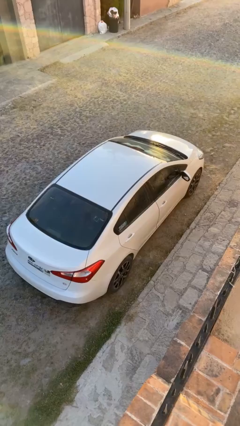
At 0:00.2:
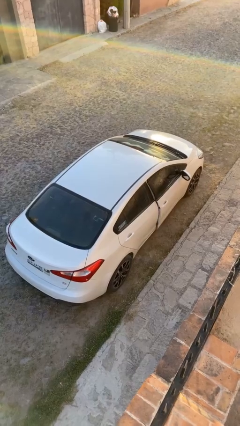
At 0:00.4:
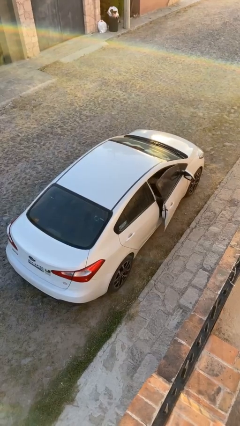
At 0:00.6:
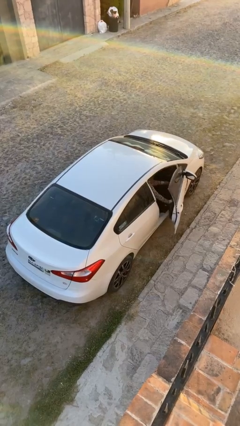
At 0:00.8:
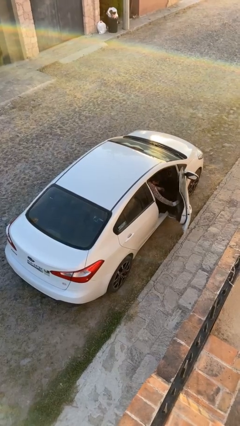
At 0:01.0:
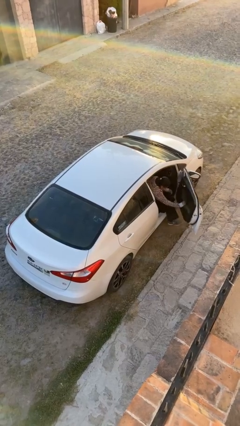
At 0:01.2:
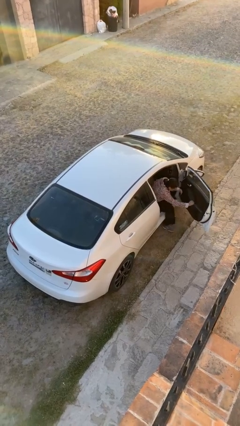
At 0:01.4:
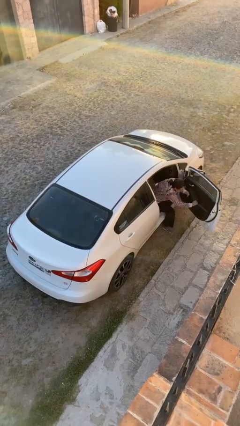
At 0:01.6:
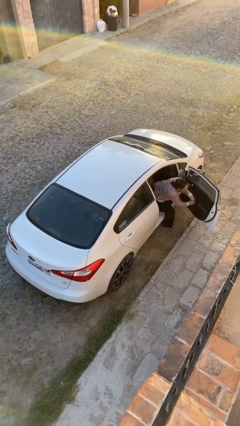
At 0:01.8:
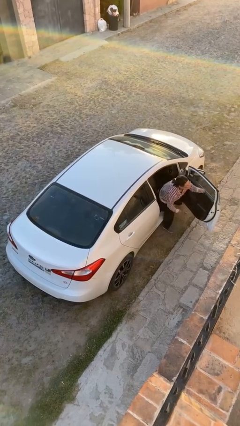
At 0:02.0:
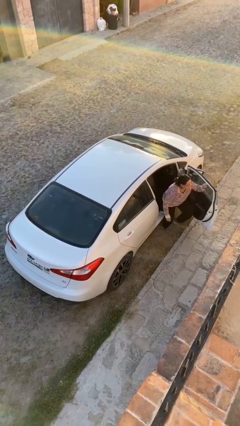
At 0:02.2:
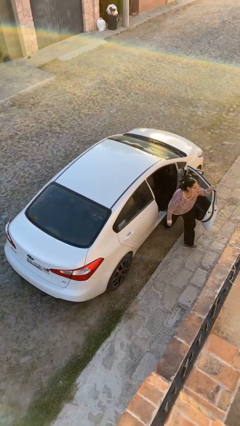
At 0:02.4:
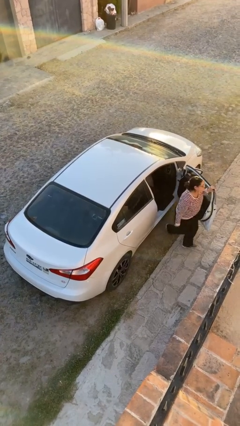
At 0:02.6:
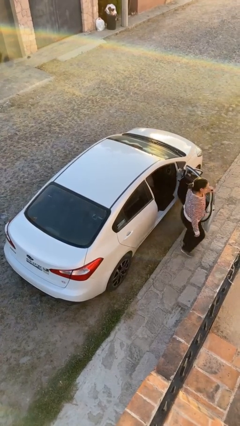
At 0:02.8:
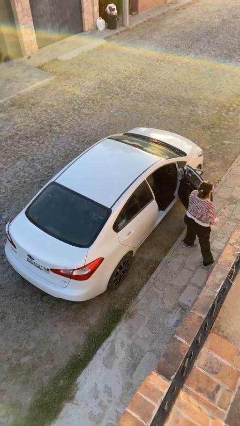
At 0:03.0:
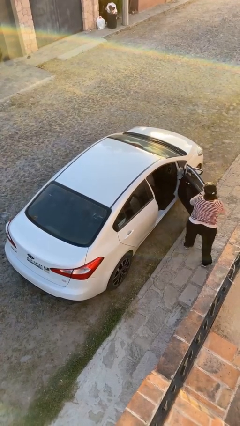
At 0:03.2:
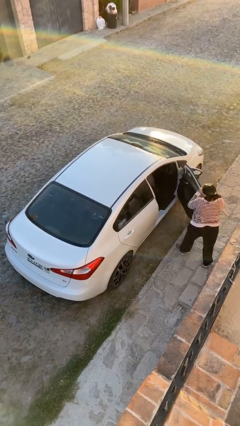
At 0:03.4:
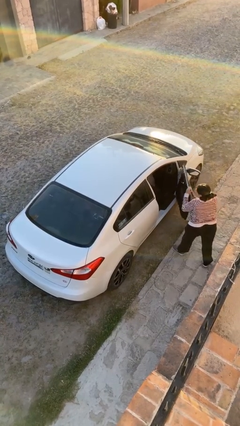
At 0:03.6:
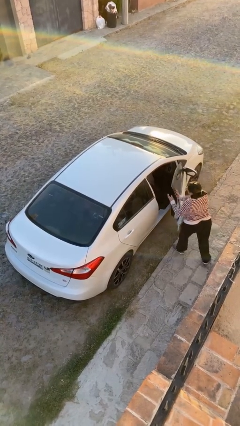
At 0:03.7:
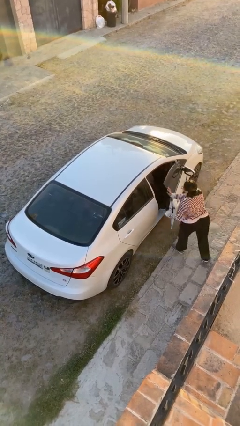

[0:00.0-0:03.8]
car drops off person

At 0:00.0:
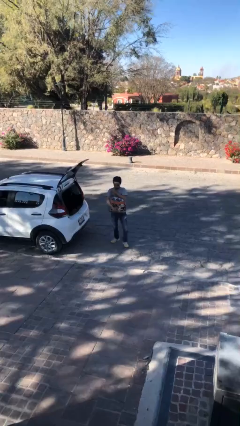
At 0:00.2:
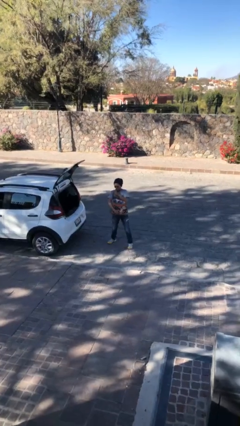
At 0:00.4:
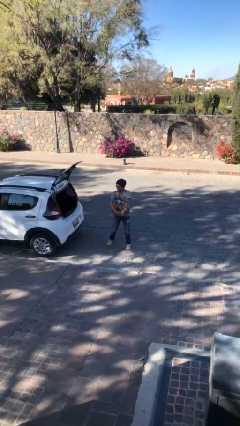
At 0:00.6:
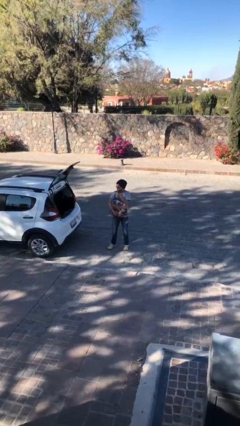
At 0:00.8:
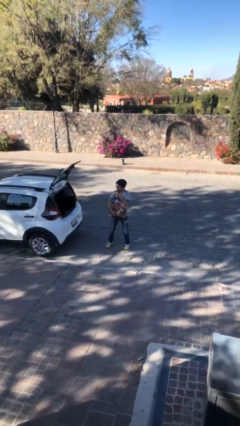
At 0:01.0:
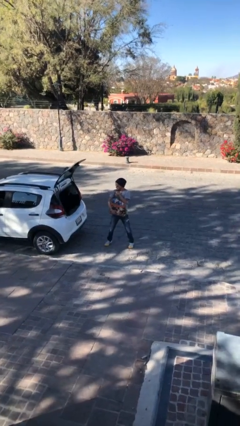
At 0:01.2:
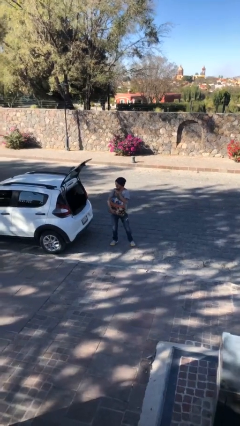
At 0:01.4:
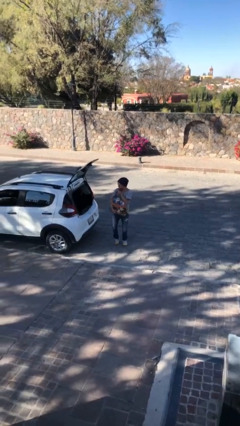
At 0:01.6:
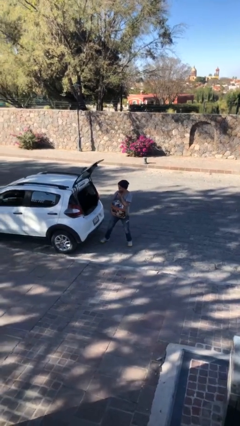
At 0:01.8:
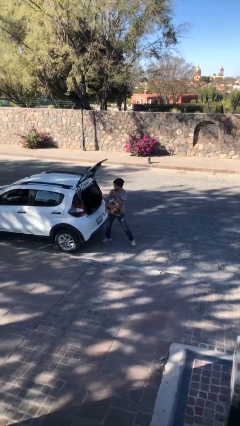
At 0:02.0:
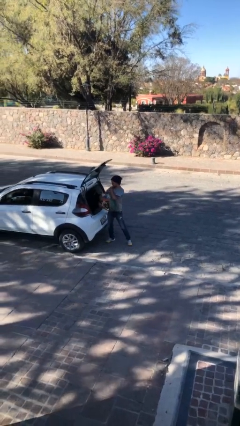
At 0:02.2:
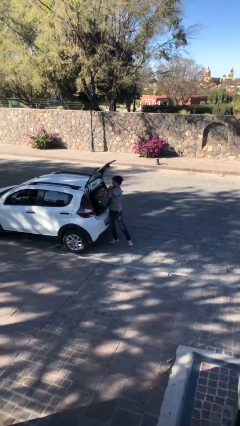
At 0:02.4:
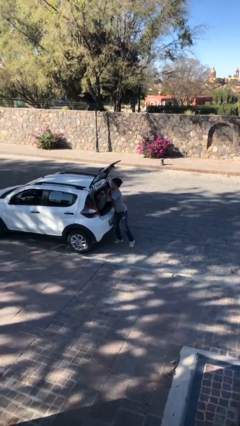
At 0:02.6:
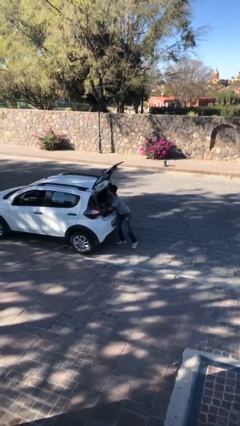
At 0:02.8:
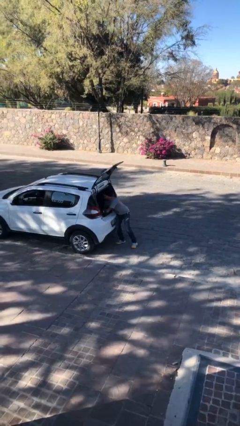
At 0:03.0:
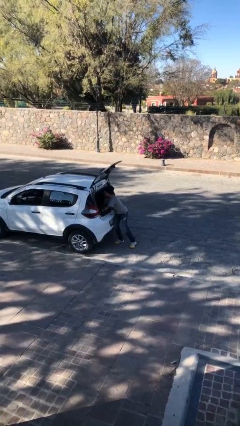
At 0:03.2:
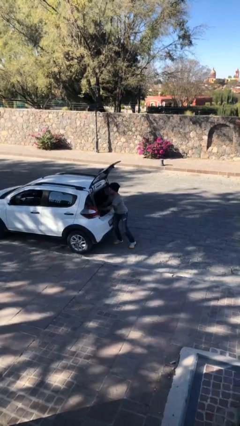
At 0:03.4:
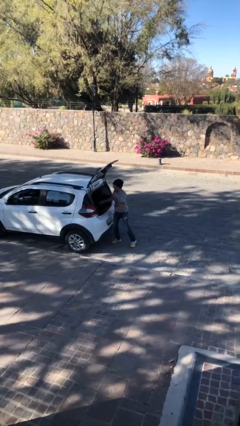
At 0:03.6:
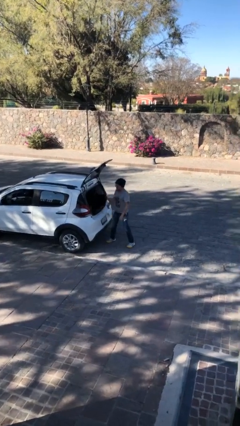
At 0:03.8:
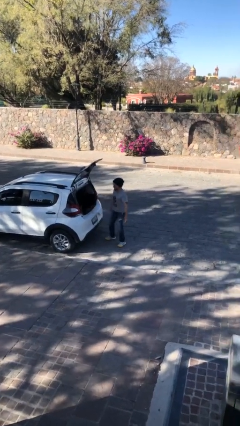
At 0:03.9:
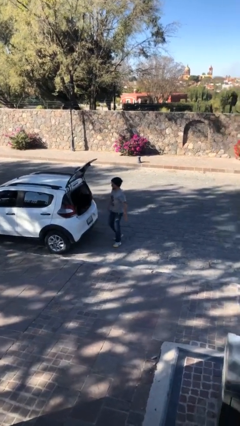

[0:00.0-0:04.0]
person loads car

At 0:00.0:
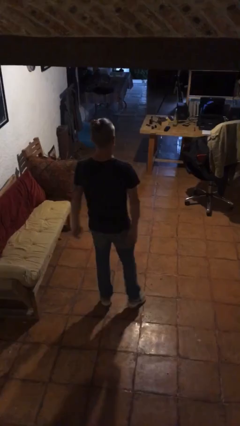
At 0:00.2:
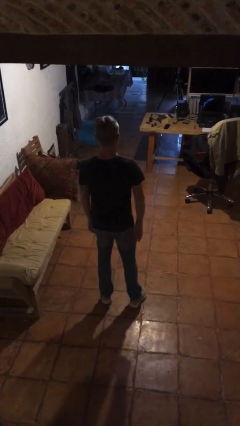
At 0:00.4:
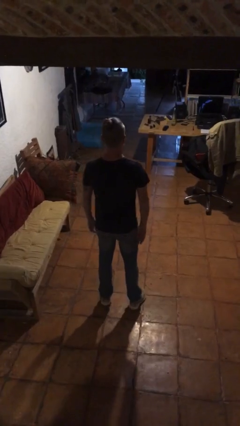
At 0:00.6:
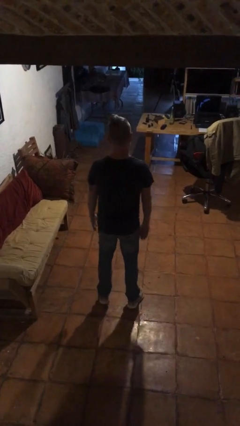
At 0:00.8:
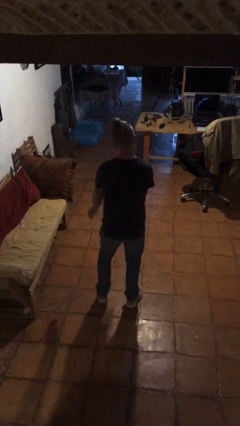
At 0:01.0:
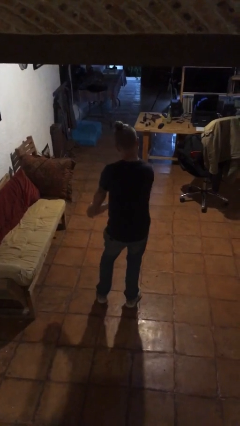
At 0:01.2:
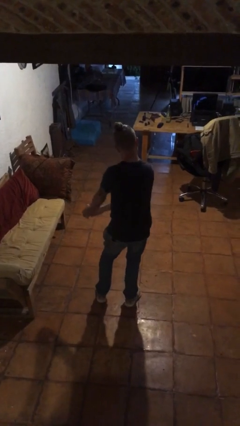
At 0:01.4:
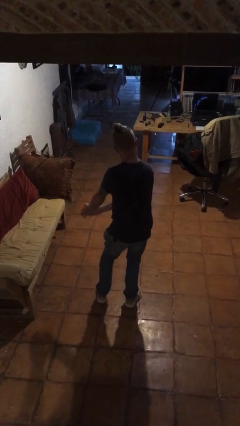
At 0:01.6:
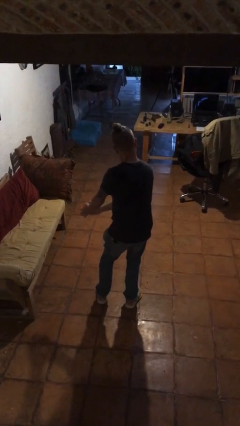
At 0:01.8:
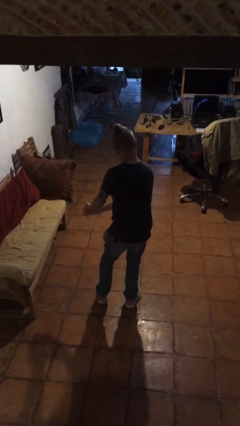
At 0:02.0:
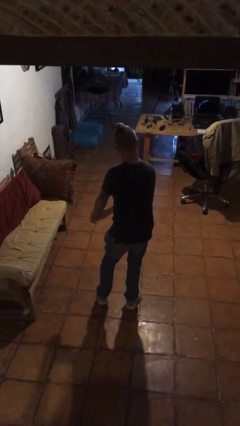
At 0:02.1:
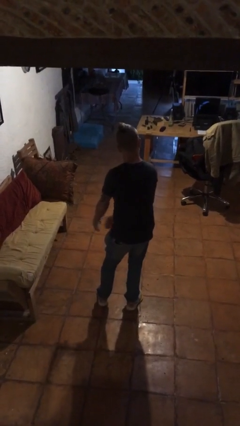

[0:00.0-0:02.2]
person claps hands

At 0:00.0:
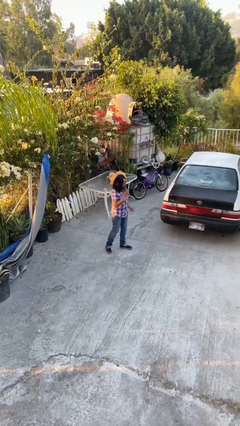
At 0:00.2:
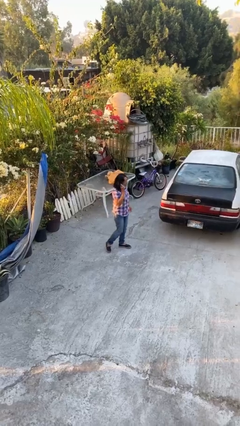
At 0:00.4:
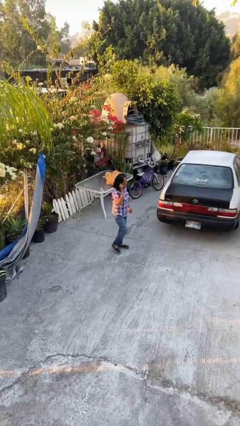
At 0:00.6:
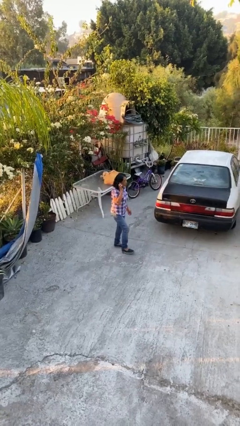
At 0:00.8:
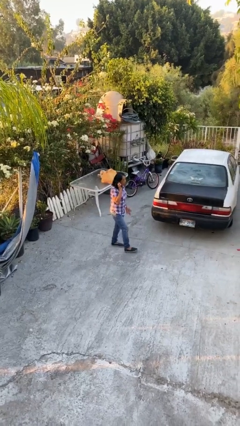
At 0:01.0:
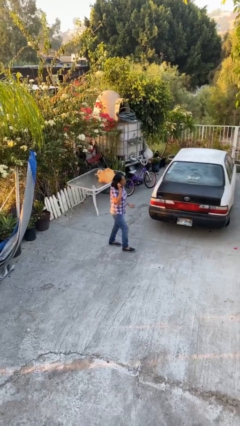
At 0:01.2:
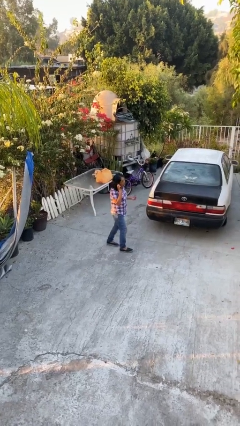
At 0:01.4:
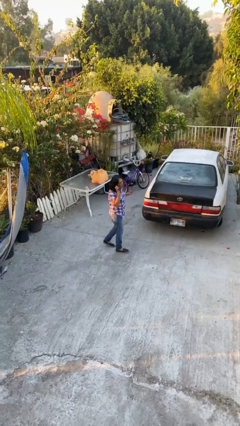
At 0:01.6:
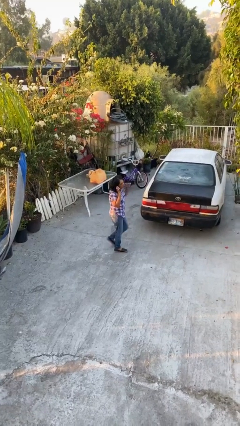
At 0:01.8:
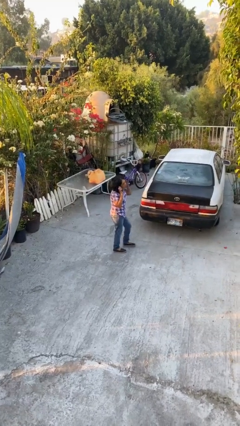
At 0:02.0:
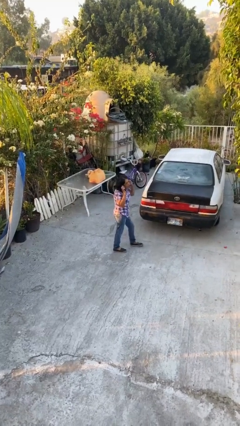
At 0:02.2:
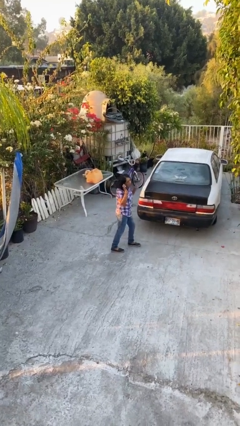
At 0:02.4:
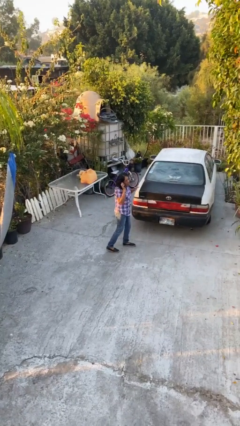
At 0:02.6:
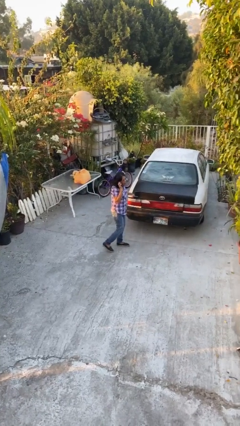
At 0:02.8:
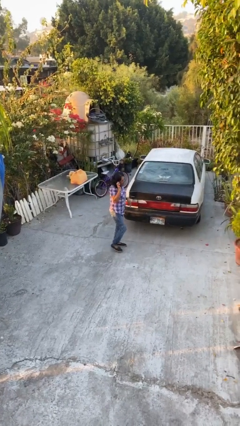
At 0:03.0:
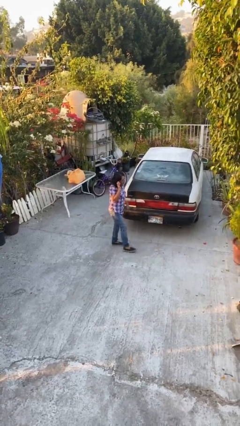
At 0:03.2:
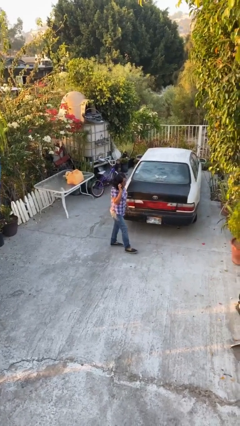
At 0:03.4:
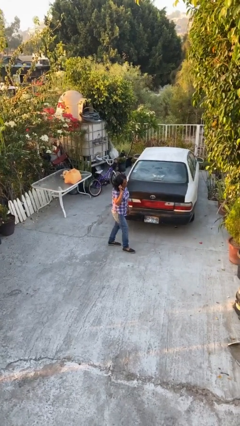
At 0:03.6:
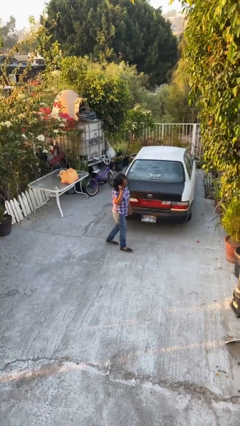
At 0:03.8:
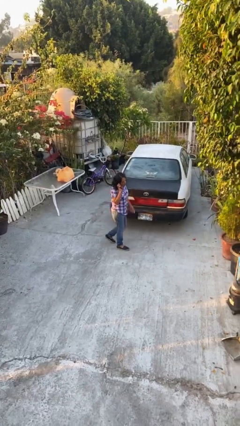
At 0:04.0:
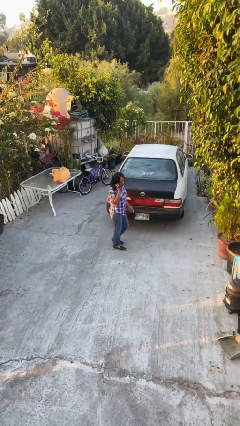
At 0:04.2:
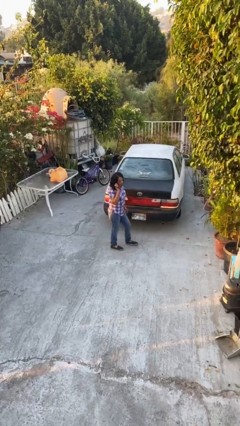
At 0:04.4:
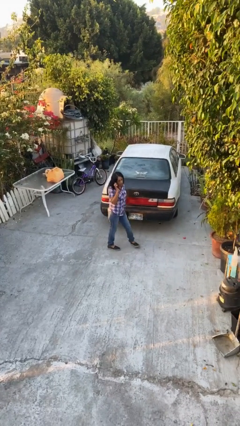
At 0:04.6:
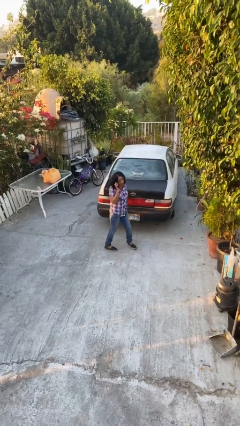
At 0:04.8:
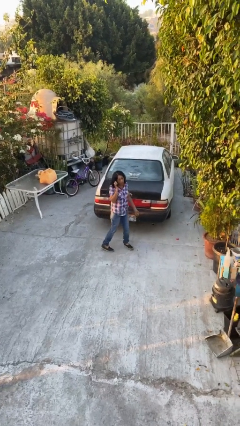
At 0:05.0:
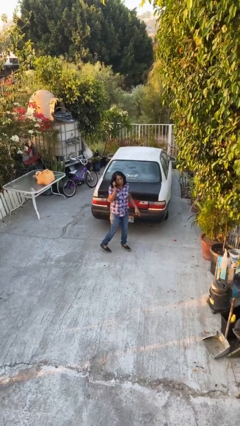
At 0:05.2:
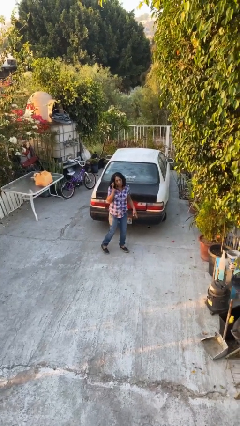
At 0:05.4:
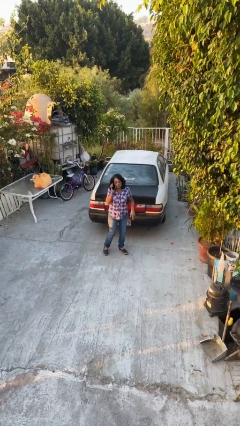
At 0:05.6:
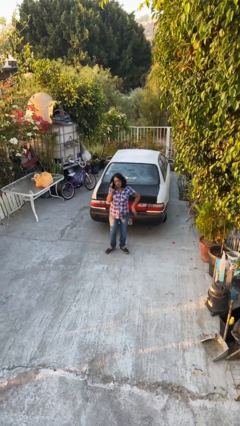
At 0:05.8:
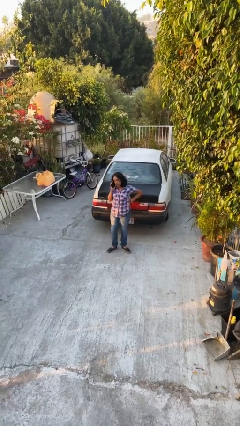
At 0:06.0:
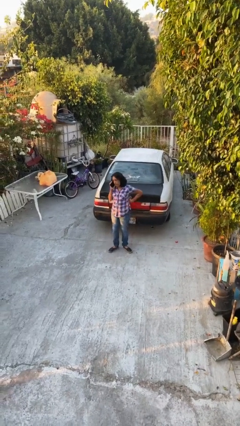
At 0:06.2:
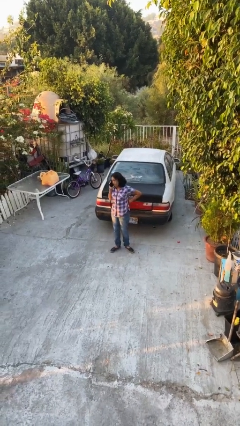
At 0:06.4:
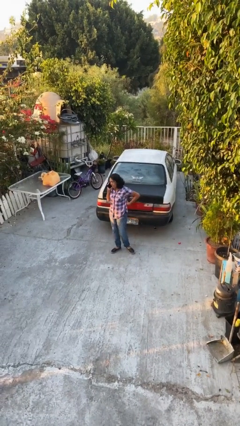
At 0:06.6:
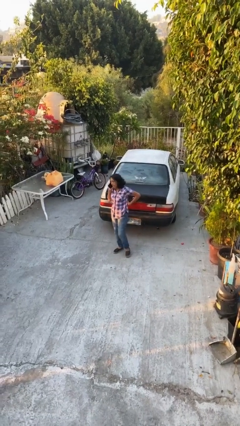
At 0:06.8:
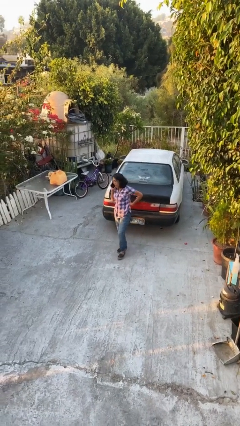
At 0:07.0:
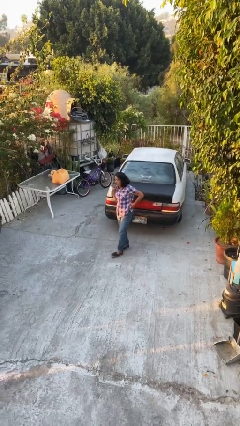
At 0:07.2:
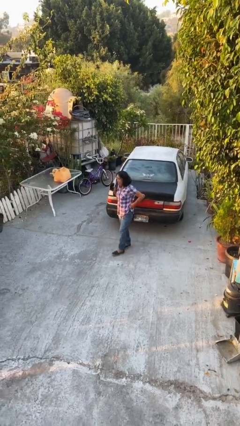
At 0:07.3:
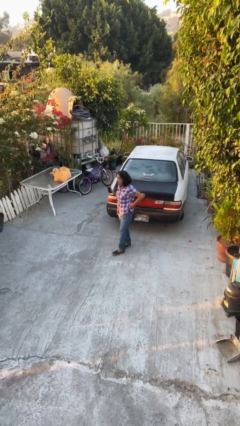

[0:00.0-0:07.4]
person talks on phone

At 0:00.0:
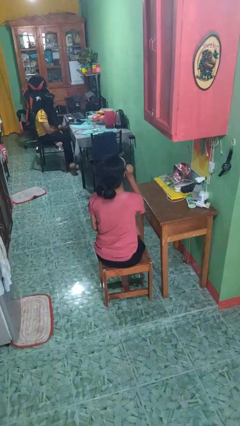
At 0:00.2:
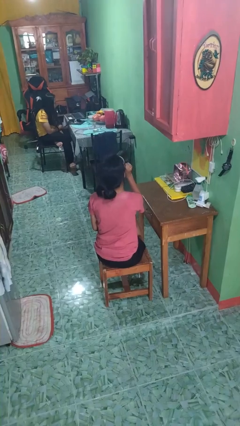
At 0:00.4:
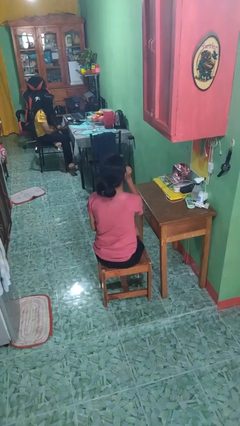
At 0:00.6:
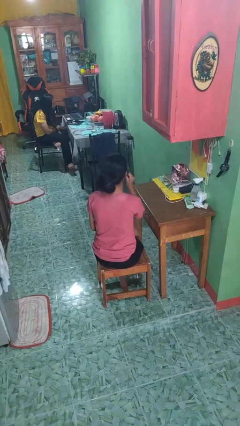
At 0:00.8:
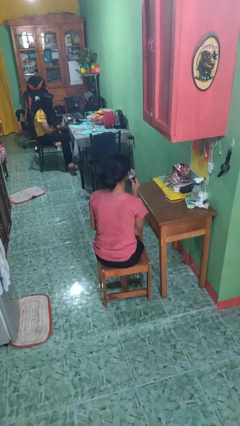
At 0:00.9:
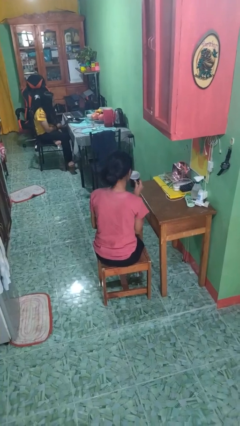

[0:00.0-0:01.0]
person drinks from mug
